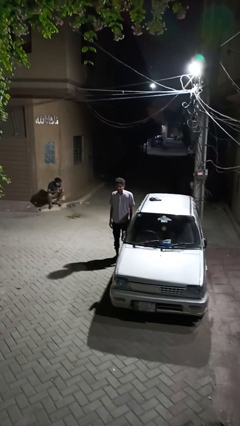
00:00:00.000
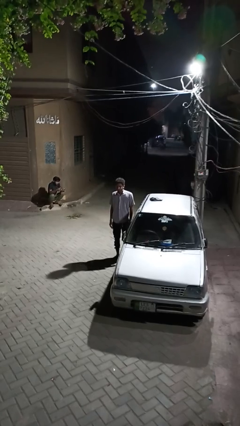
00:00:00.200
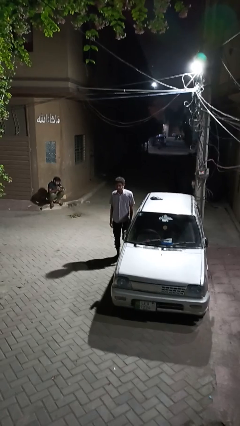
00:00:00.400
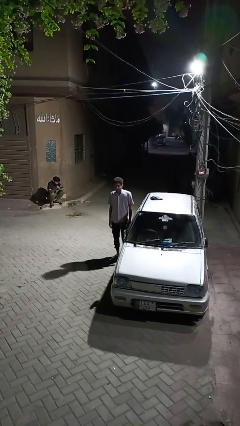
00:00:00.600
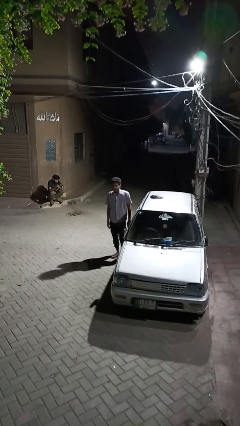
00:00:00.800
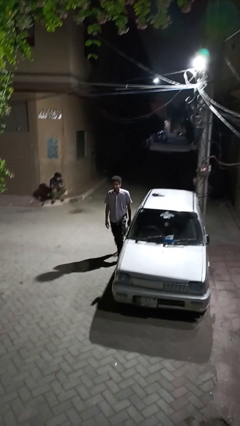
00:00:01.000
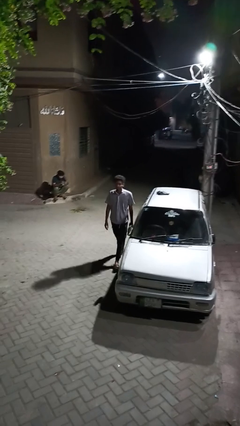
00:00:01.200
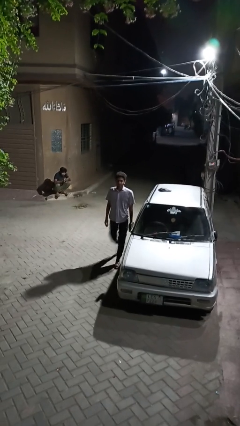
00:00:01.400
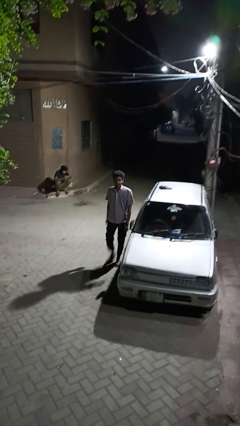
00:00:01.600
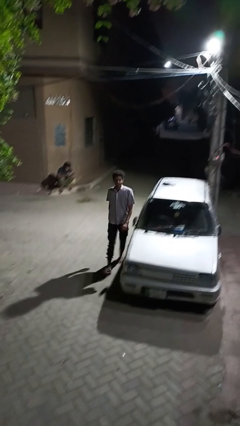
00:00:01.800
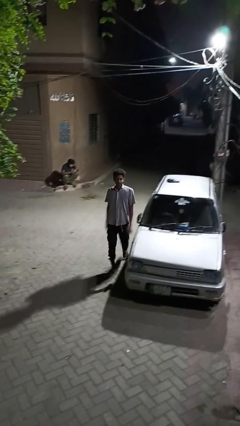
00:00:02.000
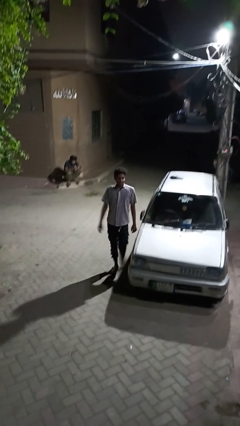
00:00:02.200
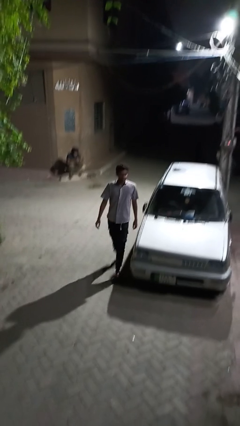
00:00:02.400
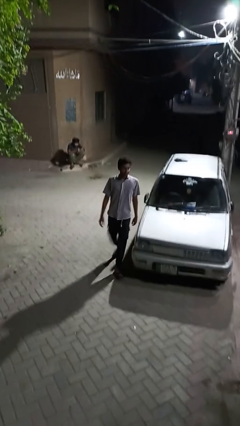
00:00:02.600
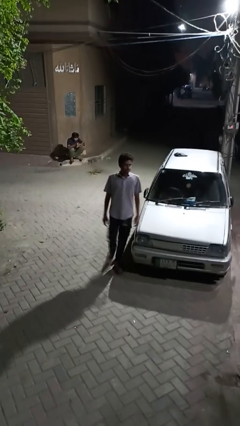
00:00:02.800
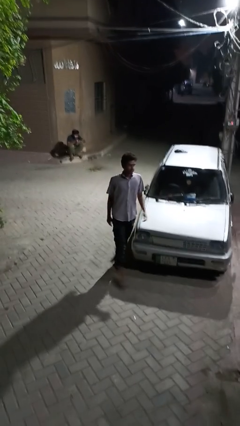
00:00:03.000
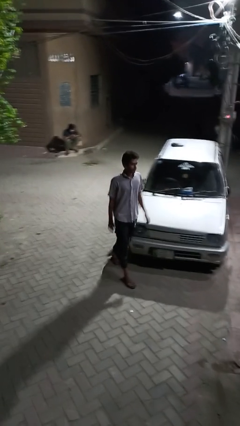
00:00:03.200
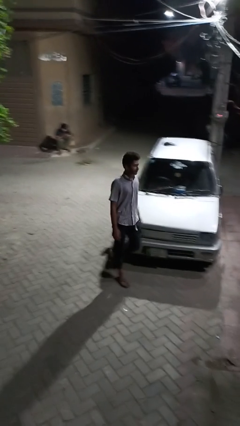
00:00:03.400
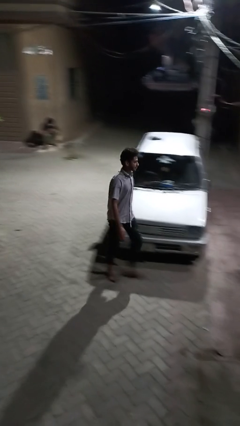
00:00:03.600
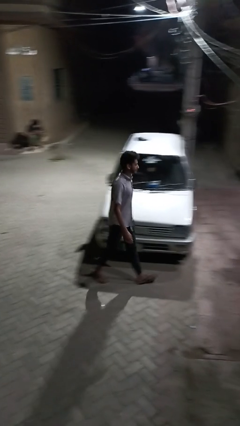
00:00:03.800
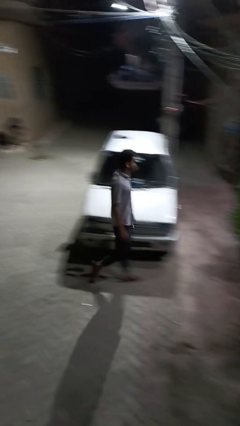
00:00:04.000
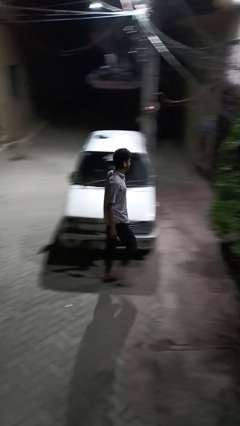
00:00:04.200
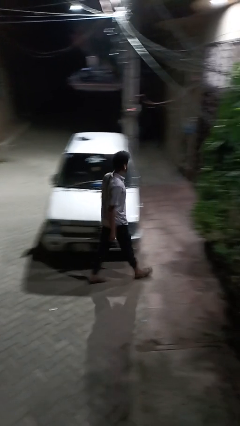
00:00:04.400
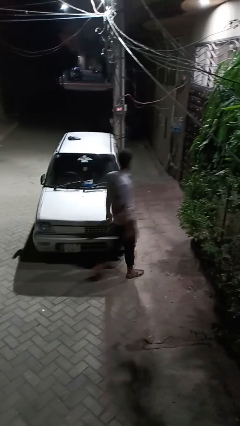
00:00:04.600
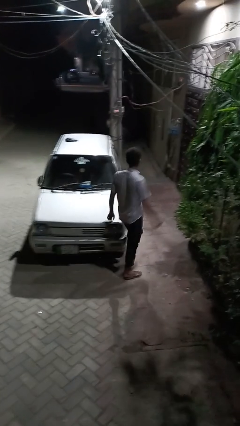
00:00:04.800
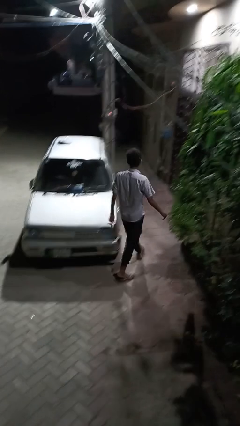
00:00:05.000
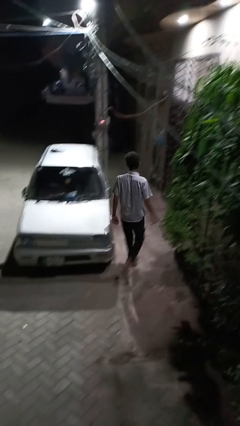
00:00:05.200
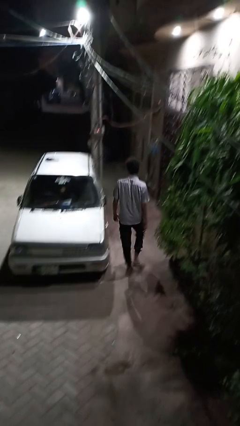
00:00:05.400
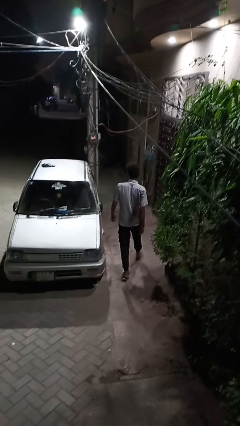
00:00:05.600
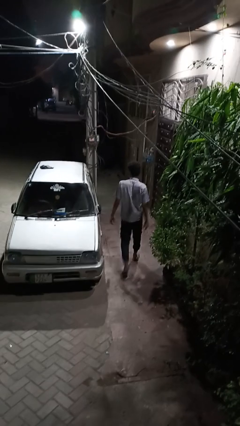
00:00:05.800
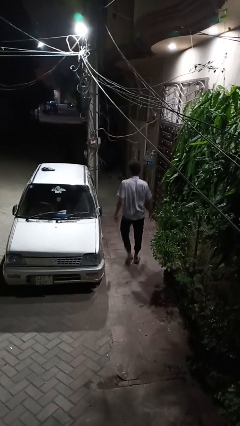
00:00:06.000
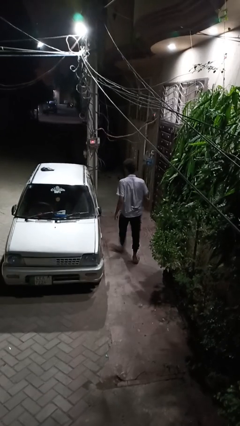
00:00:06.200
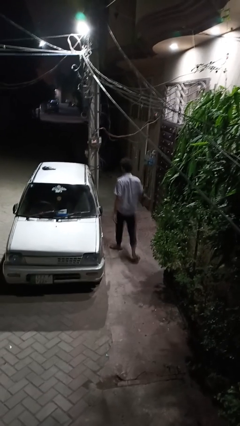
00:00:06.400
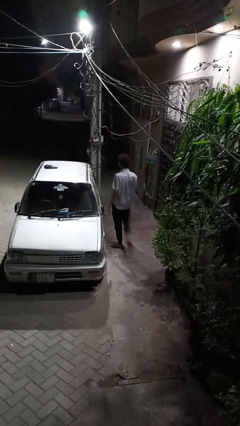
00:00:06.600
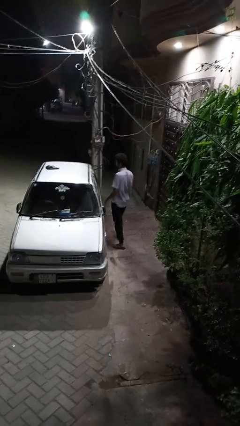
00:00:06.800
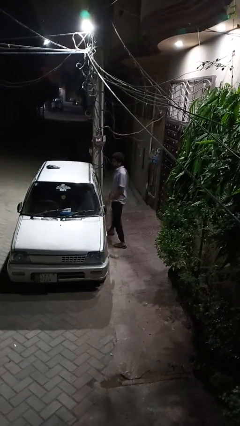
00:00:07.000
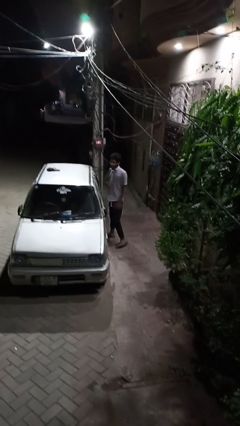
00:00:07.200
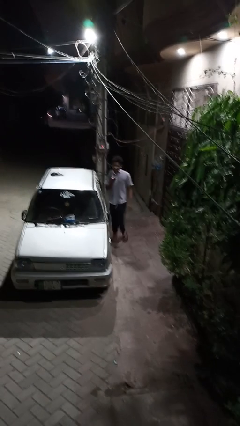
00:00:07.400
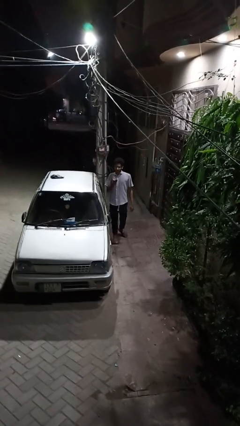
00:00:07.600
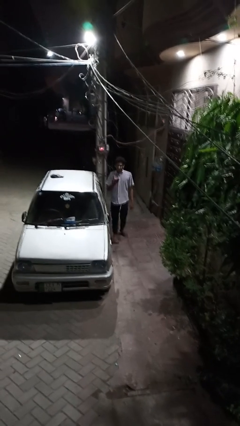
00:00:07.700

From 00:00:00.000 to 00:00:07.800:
person walks around car

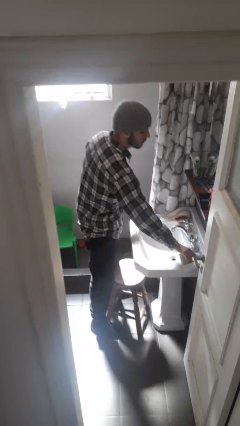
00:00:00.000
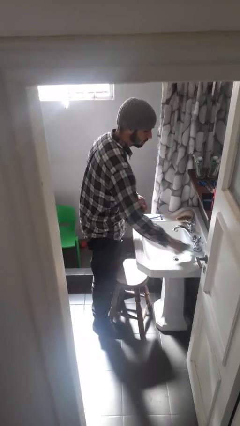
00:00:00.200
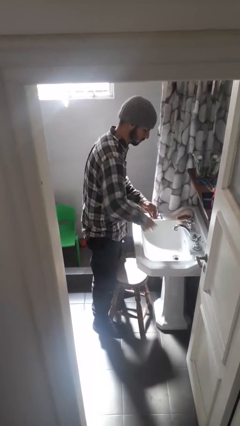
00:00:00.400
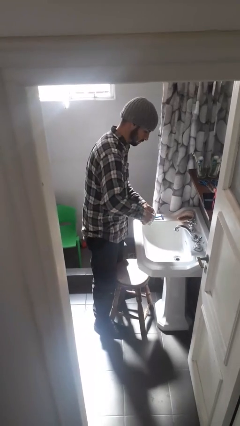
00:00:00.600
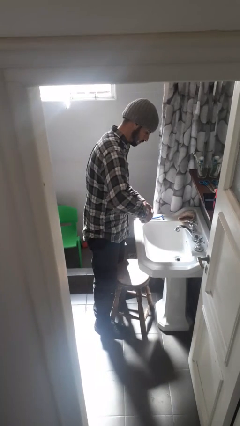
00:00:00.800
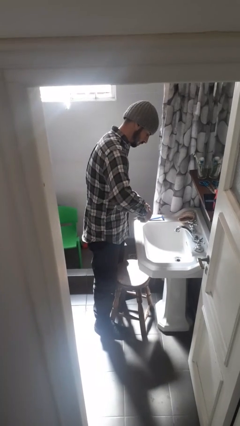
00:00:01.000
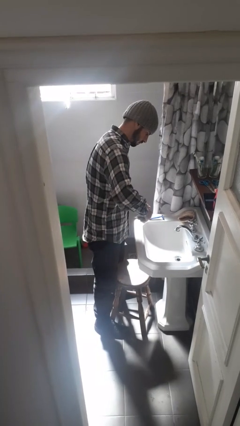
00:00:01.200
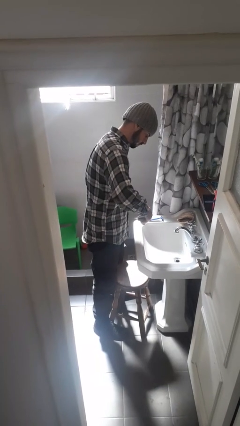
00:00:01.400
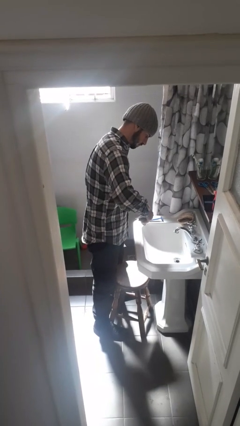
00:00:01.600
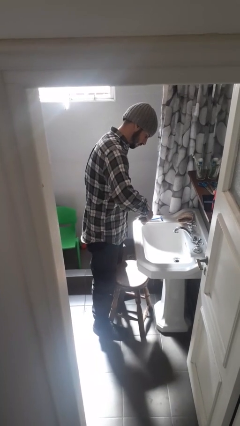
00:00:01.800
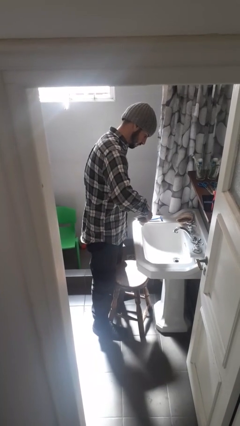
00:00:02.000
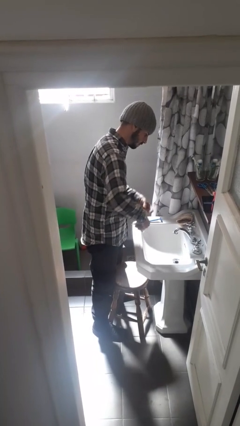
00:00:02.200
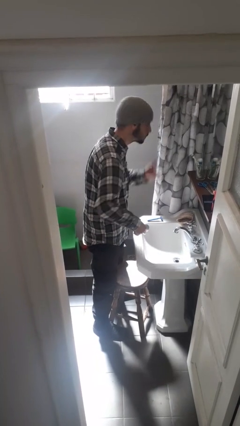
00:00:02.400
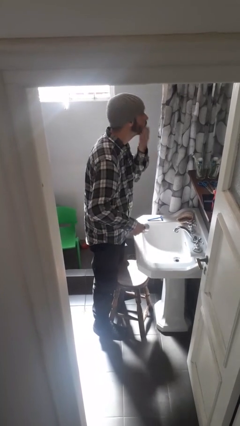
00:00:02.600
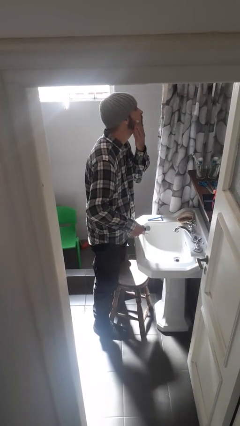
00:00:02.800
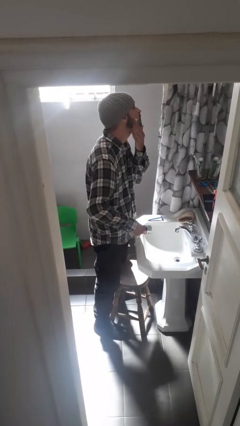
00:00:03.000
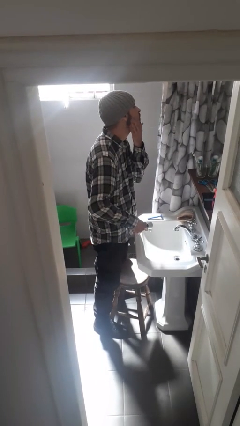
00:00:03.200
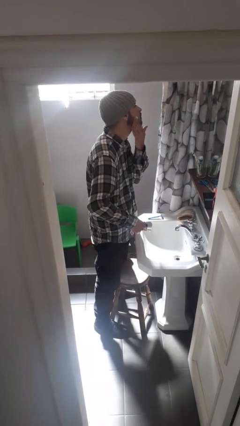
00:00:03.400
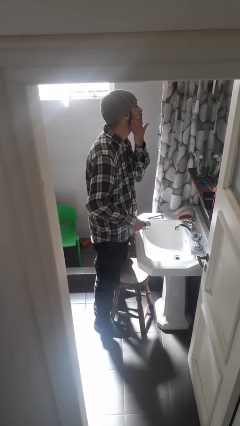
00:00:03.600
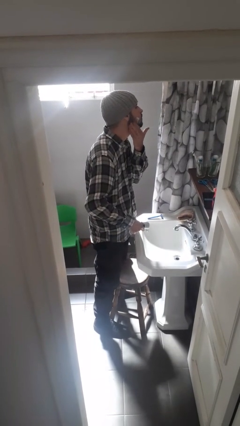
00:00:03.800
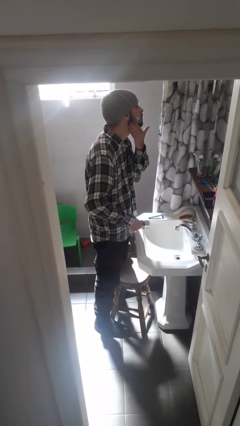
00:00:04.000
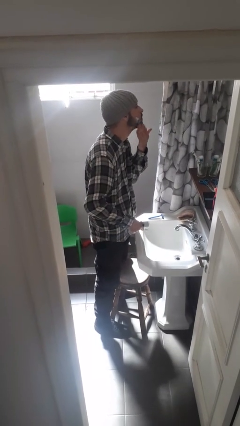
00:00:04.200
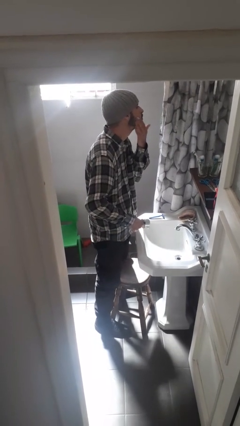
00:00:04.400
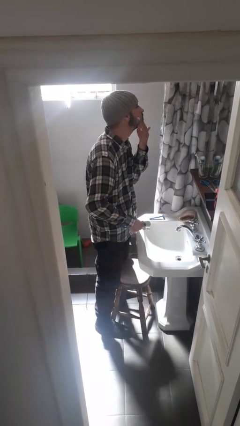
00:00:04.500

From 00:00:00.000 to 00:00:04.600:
person applies shaving cream

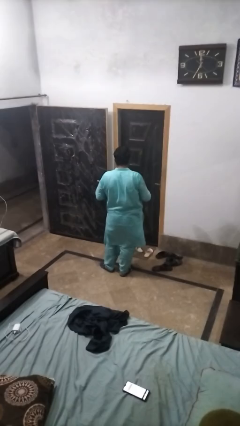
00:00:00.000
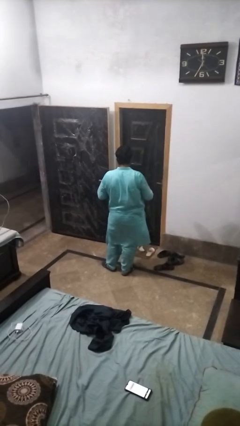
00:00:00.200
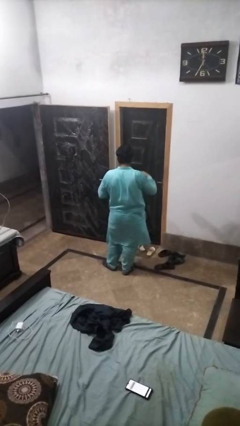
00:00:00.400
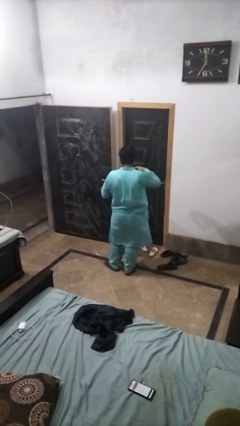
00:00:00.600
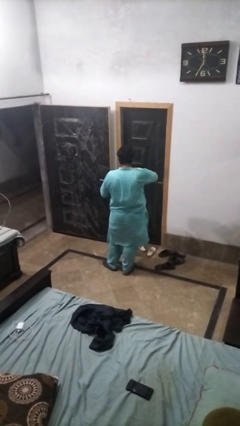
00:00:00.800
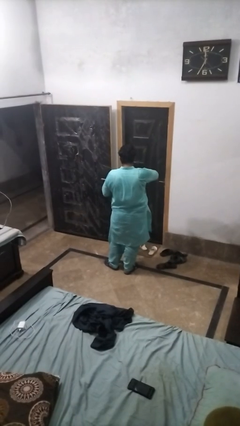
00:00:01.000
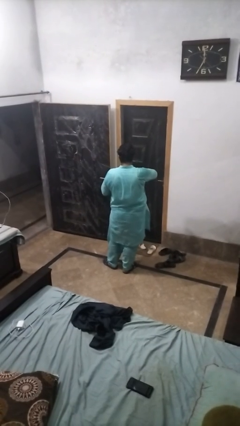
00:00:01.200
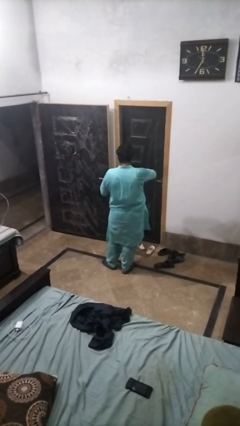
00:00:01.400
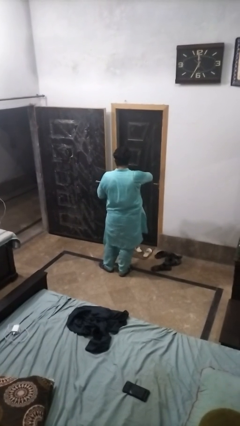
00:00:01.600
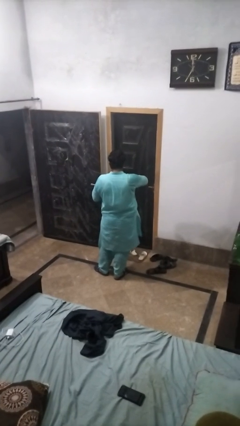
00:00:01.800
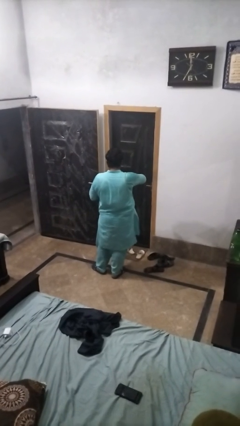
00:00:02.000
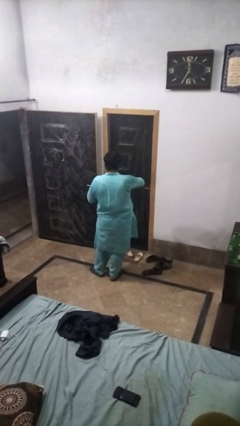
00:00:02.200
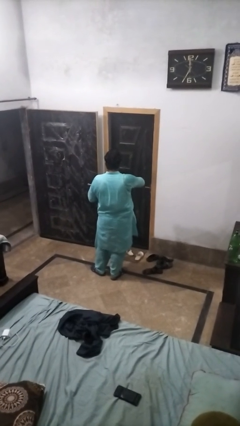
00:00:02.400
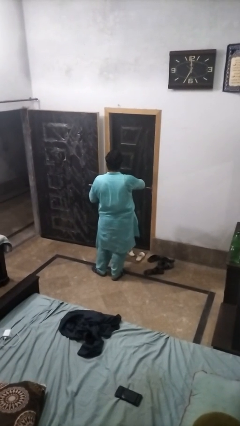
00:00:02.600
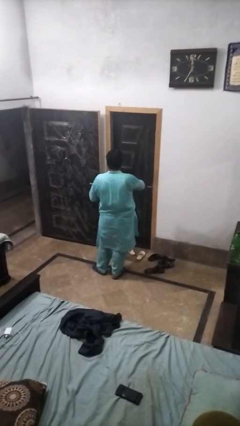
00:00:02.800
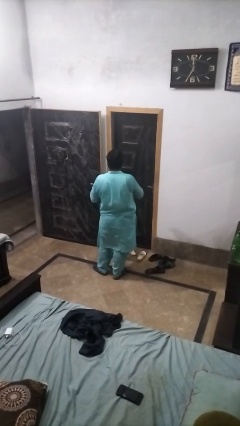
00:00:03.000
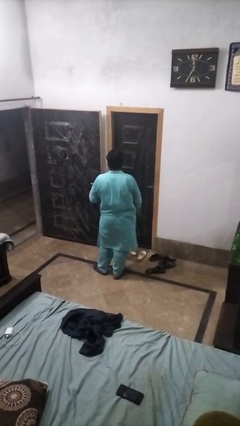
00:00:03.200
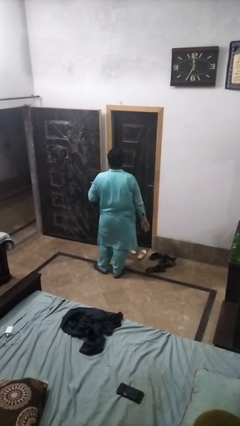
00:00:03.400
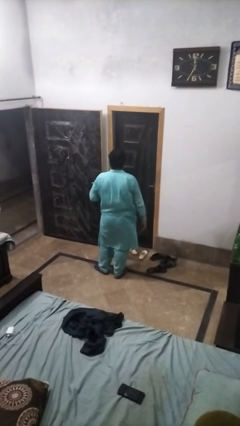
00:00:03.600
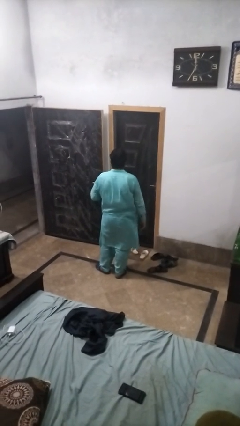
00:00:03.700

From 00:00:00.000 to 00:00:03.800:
person closes jar

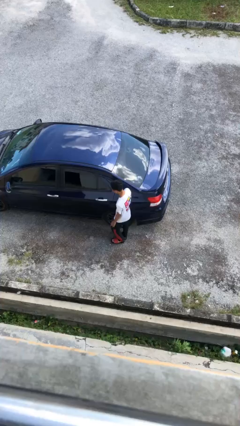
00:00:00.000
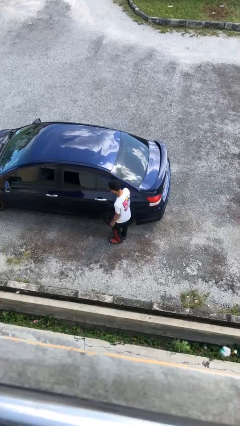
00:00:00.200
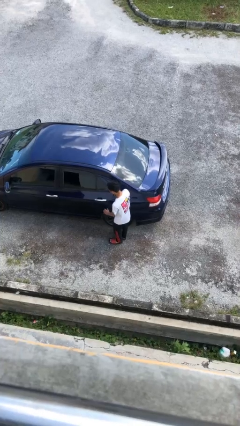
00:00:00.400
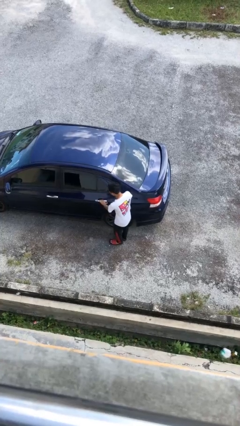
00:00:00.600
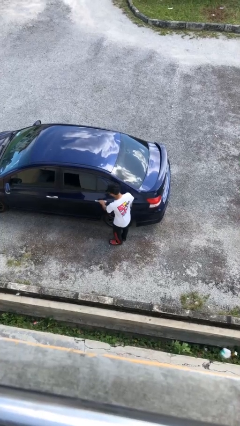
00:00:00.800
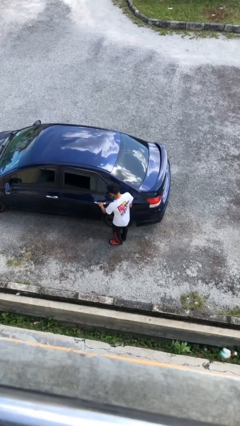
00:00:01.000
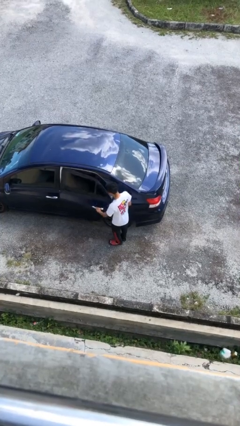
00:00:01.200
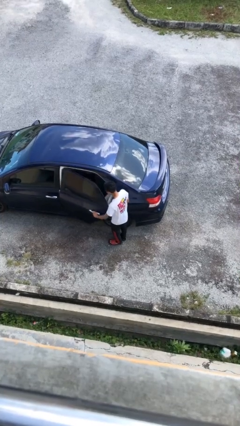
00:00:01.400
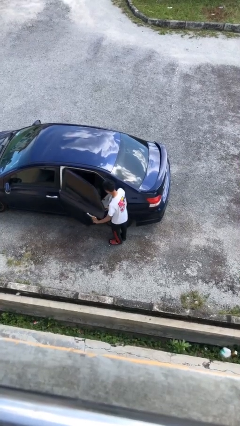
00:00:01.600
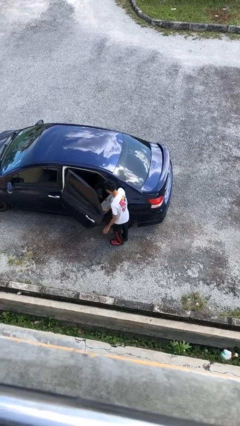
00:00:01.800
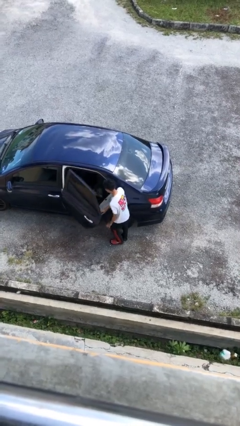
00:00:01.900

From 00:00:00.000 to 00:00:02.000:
person opens car door
